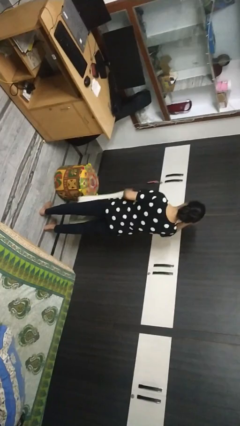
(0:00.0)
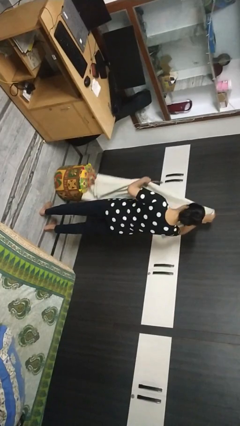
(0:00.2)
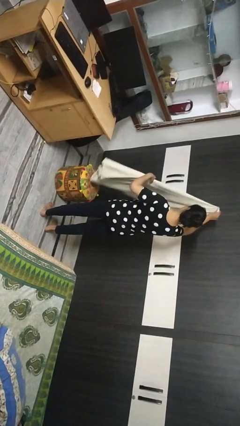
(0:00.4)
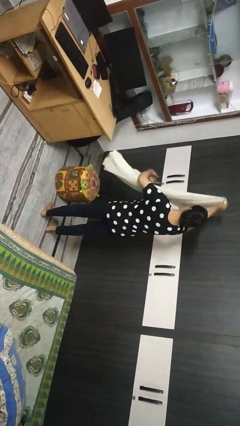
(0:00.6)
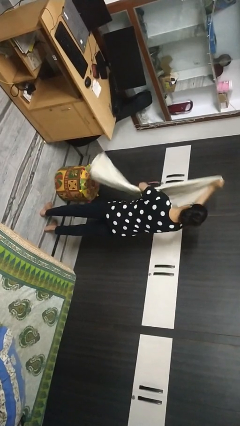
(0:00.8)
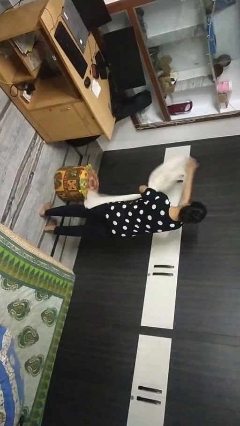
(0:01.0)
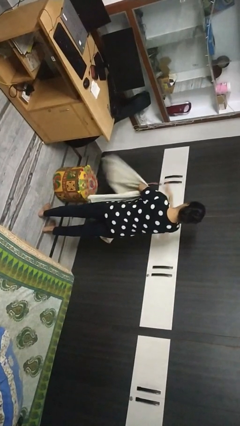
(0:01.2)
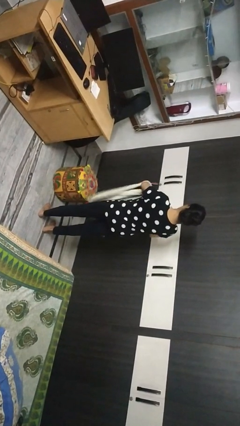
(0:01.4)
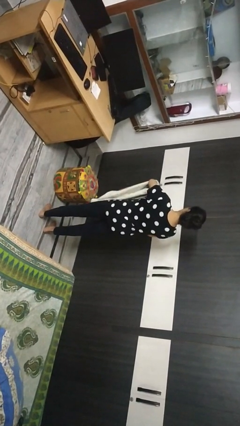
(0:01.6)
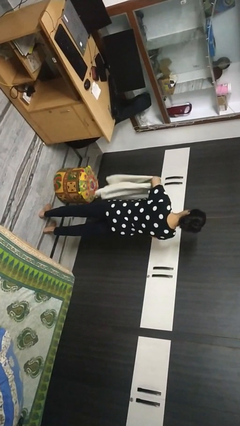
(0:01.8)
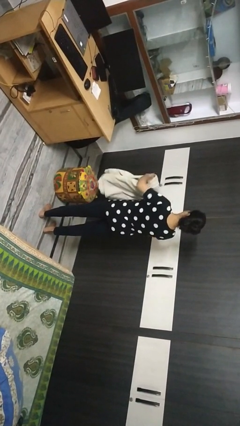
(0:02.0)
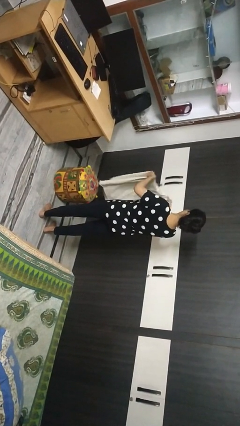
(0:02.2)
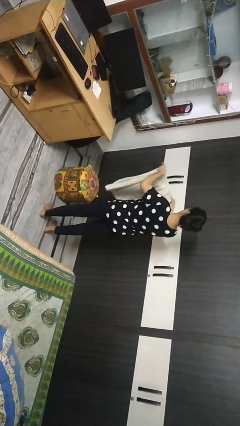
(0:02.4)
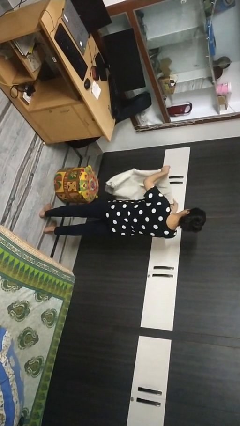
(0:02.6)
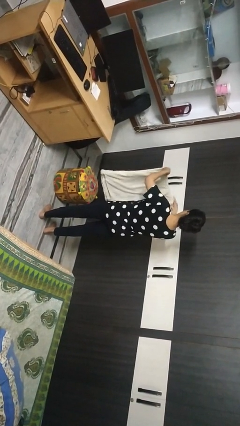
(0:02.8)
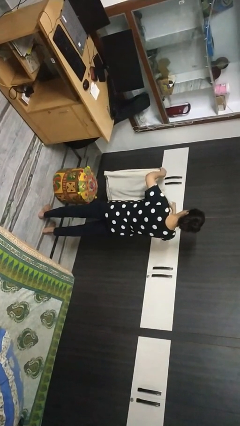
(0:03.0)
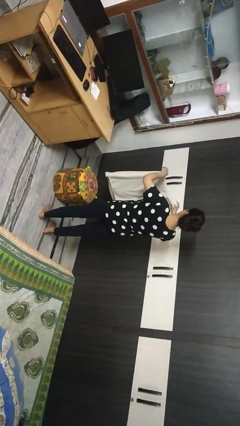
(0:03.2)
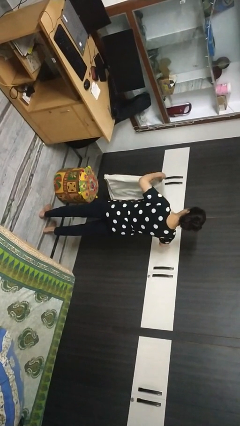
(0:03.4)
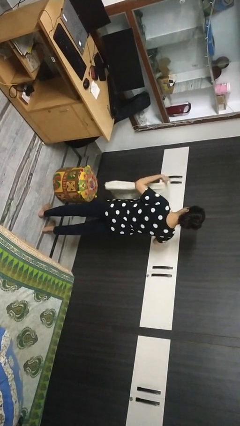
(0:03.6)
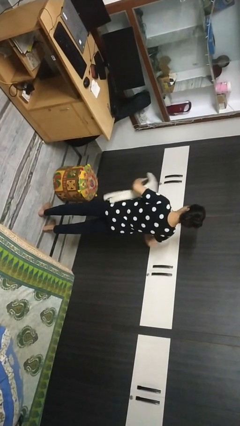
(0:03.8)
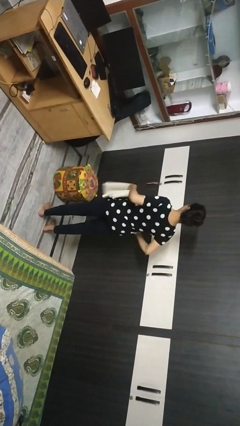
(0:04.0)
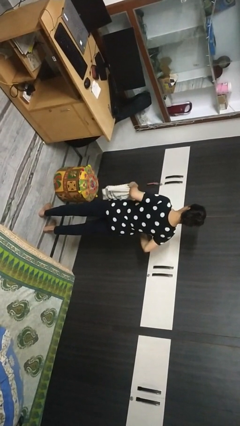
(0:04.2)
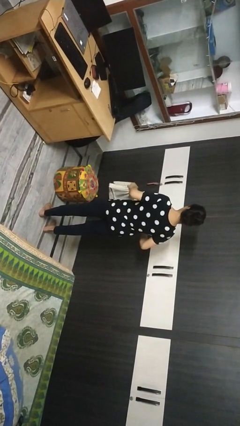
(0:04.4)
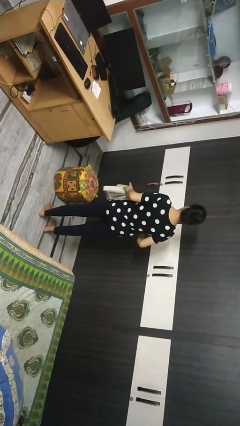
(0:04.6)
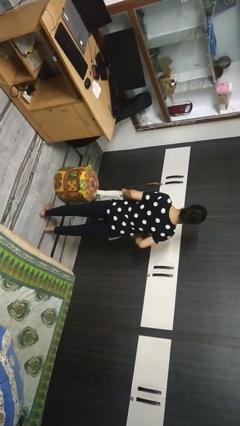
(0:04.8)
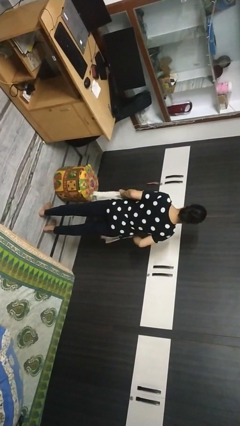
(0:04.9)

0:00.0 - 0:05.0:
person folds blanket

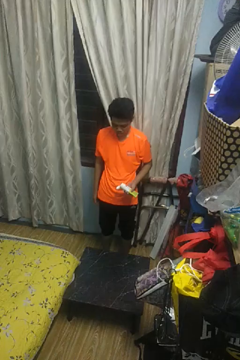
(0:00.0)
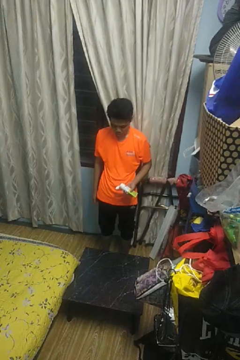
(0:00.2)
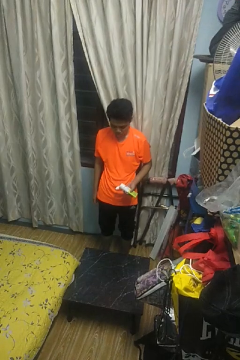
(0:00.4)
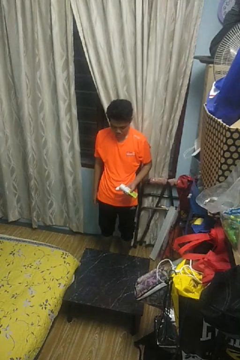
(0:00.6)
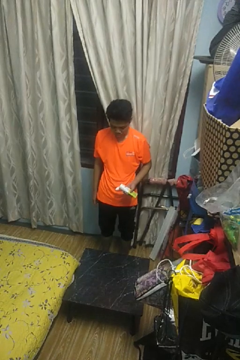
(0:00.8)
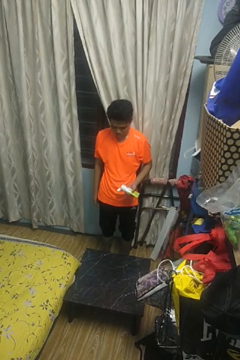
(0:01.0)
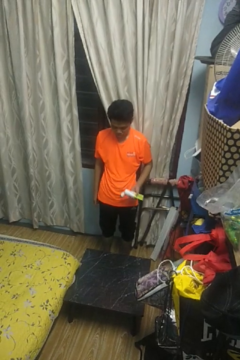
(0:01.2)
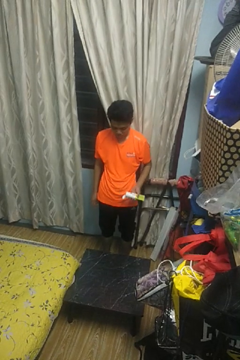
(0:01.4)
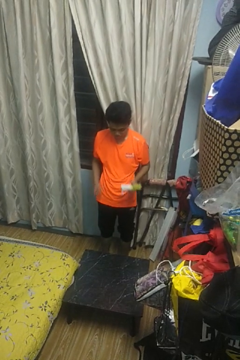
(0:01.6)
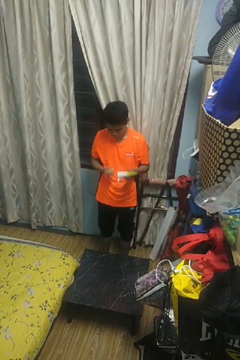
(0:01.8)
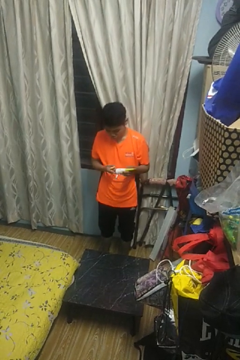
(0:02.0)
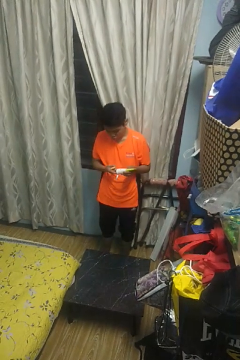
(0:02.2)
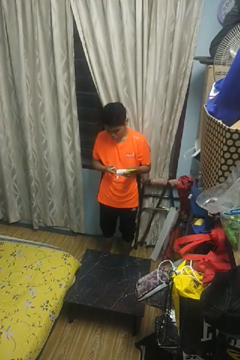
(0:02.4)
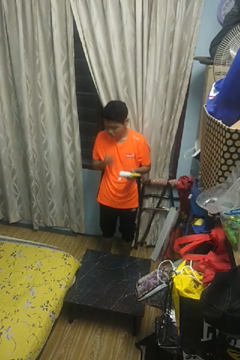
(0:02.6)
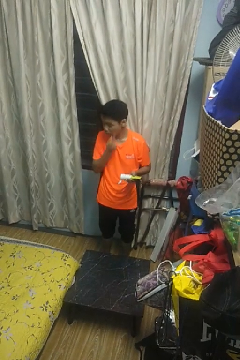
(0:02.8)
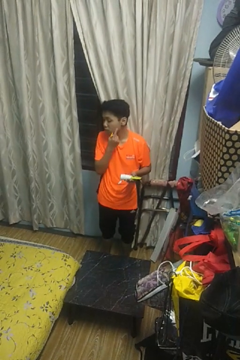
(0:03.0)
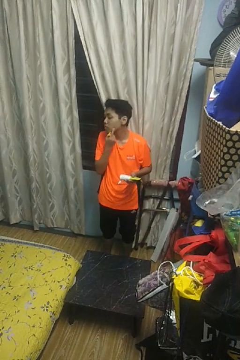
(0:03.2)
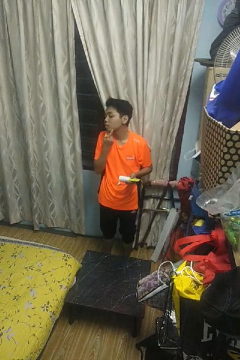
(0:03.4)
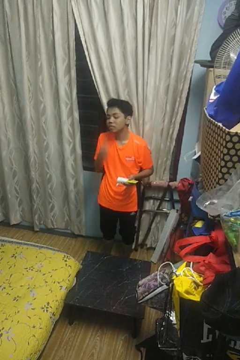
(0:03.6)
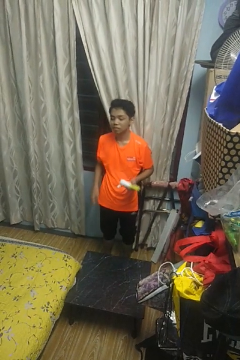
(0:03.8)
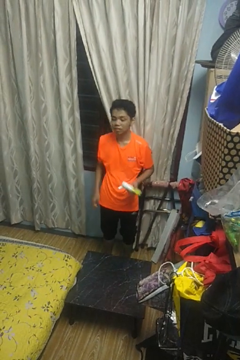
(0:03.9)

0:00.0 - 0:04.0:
person applies shaving cream

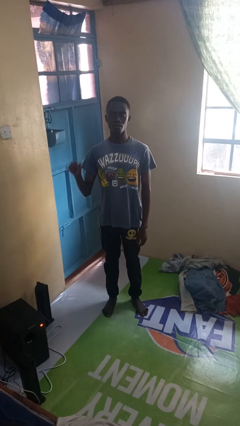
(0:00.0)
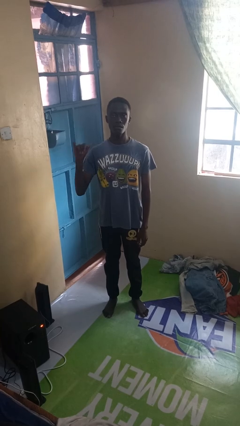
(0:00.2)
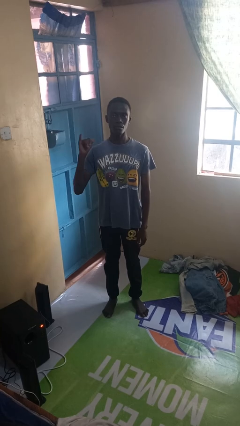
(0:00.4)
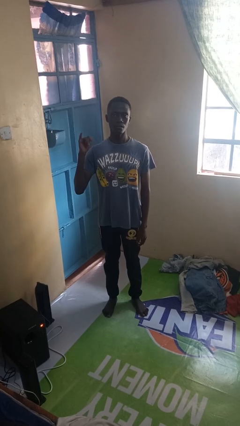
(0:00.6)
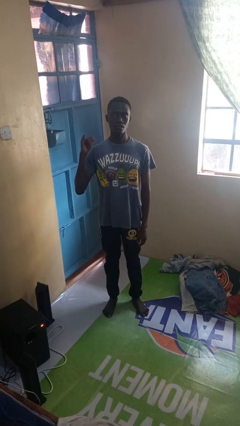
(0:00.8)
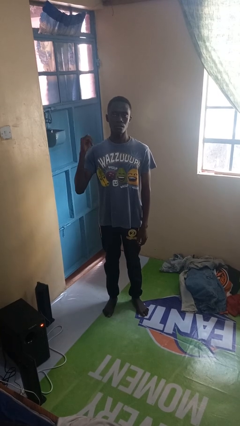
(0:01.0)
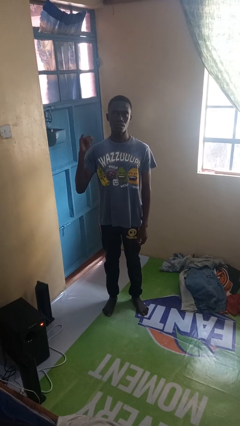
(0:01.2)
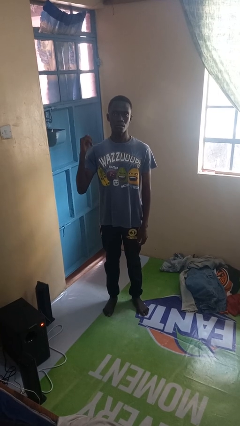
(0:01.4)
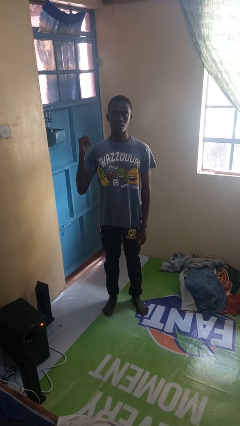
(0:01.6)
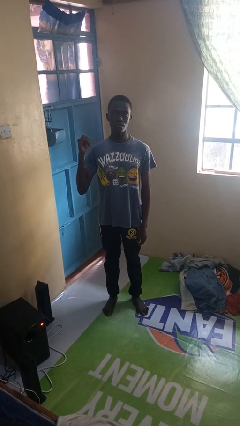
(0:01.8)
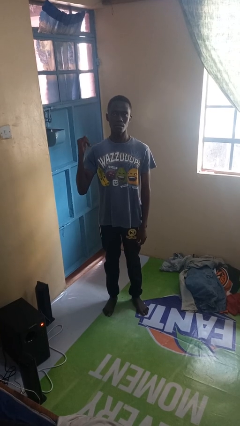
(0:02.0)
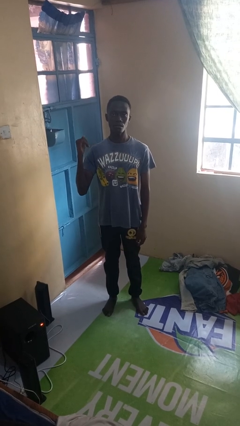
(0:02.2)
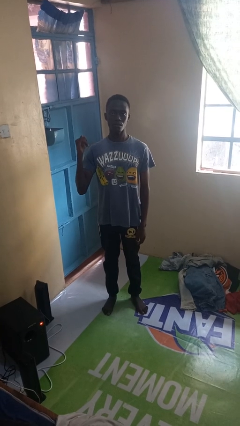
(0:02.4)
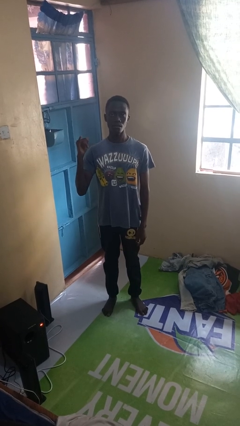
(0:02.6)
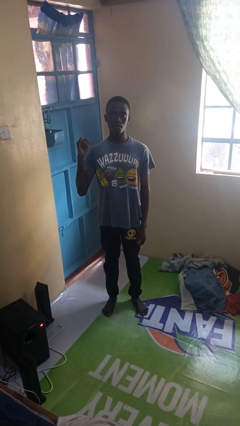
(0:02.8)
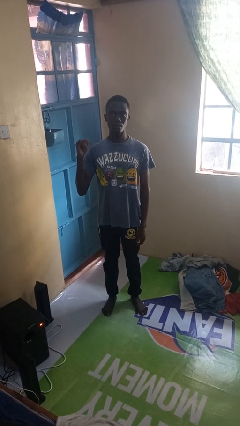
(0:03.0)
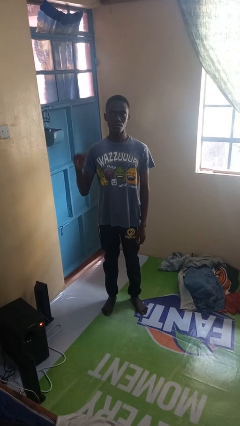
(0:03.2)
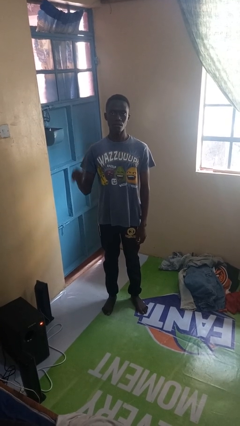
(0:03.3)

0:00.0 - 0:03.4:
person gestures hang loose

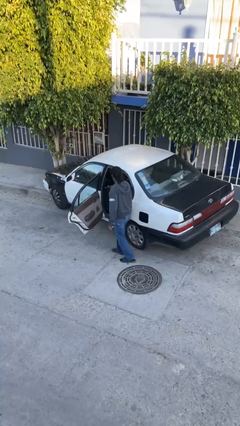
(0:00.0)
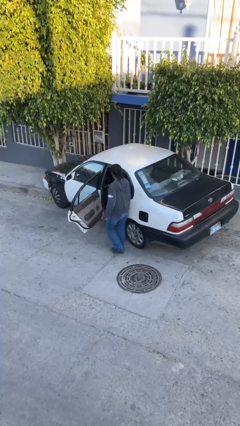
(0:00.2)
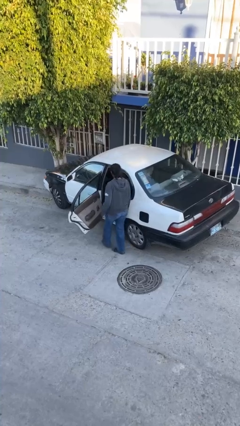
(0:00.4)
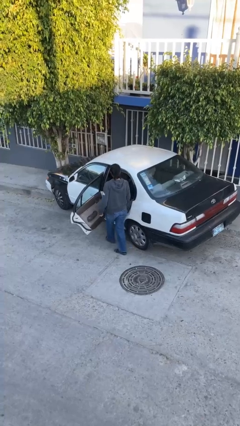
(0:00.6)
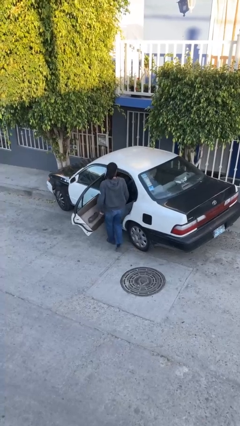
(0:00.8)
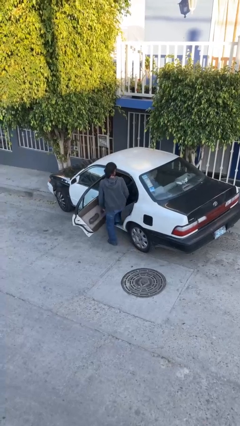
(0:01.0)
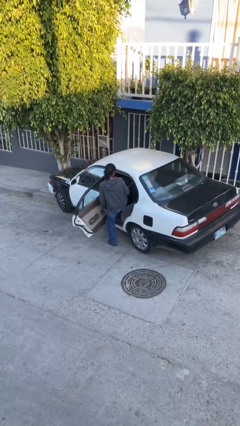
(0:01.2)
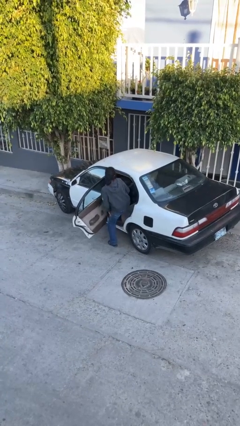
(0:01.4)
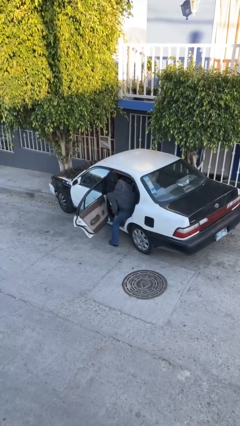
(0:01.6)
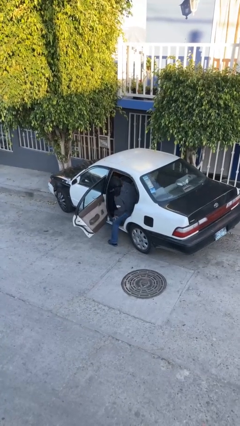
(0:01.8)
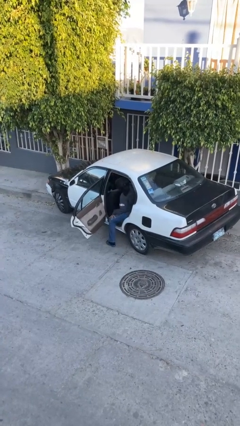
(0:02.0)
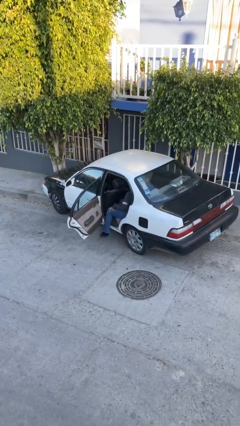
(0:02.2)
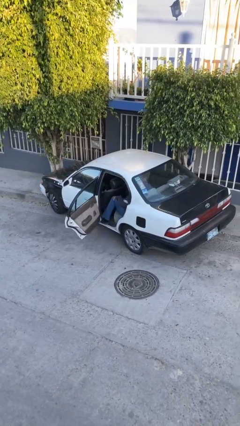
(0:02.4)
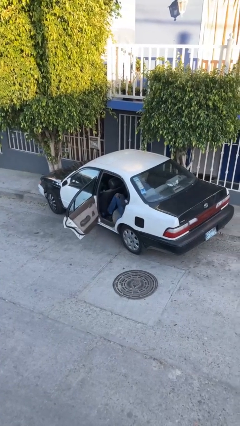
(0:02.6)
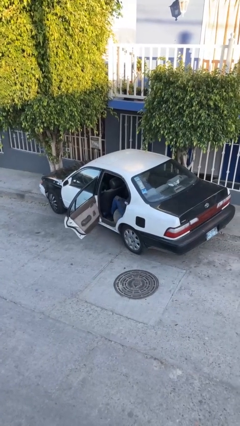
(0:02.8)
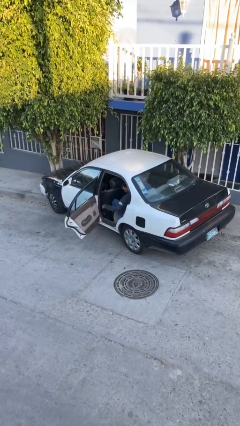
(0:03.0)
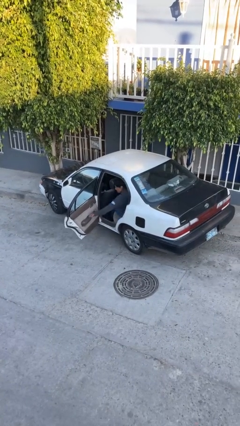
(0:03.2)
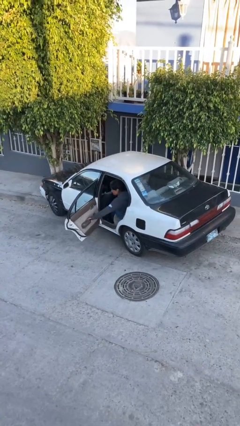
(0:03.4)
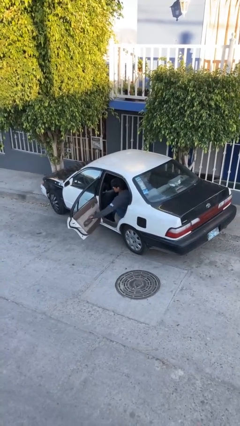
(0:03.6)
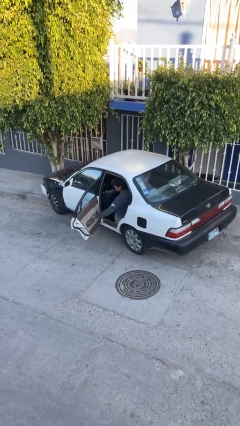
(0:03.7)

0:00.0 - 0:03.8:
person enters car

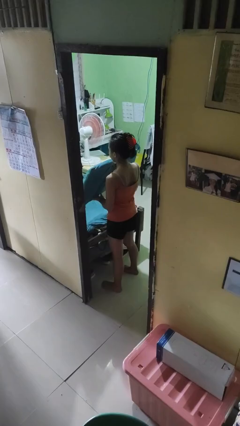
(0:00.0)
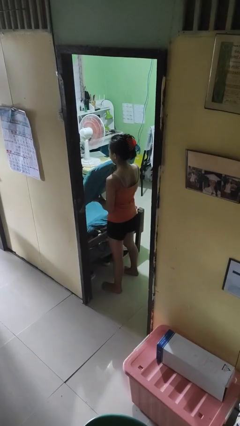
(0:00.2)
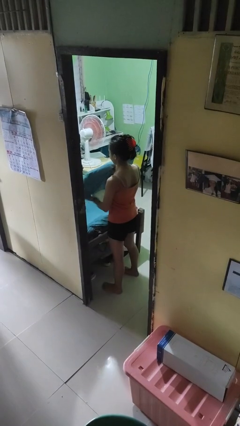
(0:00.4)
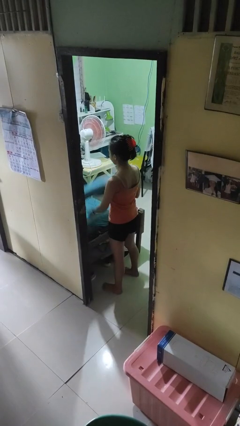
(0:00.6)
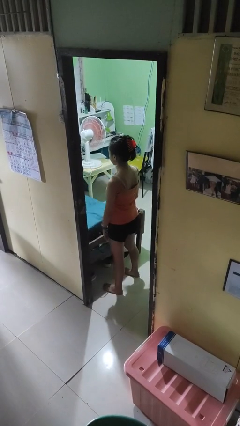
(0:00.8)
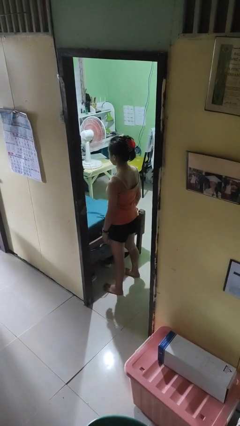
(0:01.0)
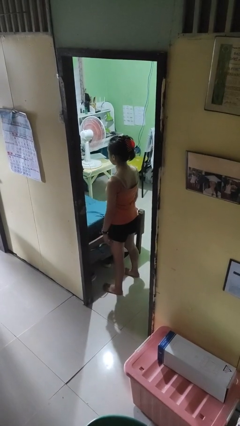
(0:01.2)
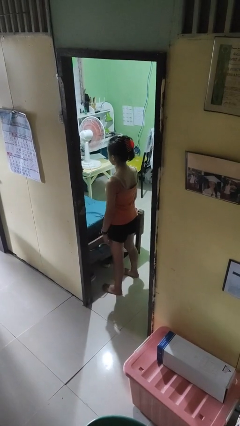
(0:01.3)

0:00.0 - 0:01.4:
person puts down object on bed

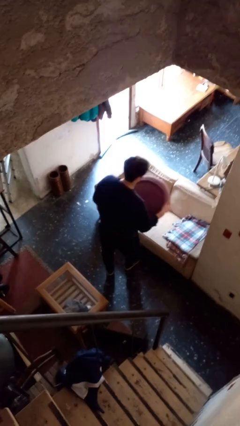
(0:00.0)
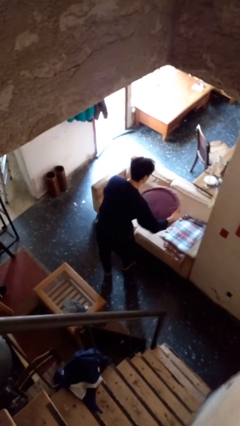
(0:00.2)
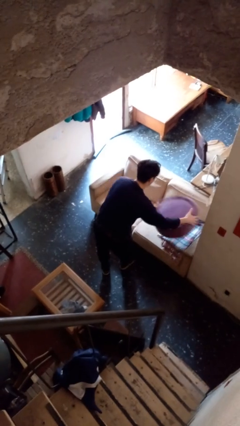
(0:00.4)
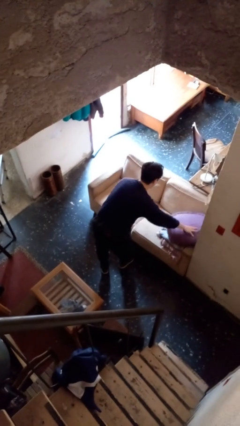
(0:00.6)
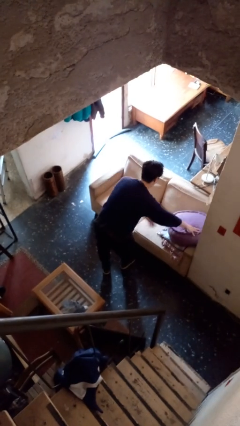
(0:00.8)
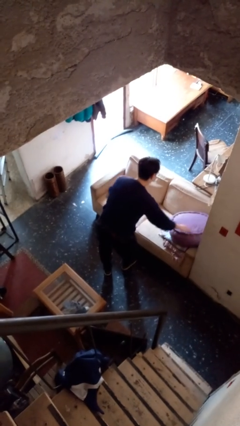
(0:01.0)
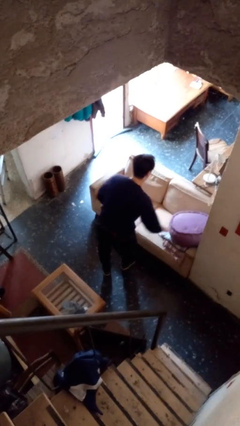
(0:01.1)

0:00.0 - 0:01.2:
person puts down object on couch
